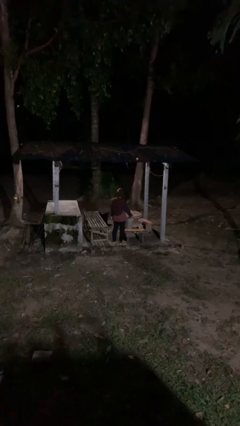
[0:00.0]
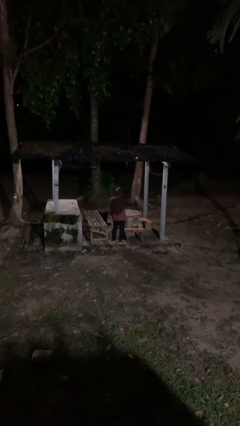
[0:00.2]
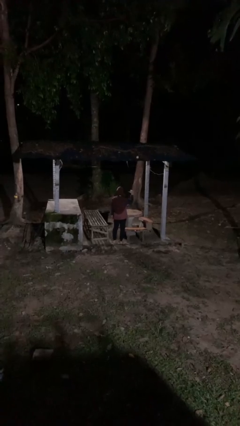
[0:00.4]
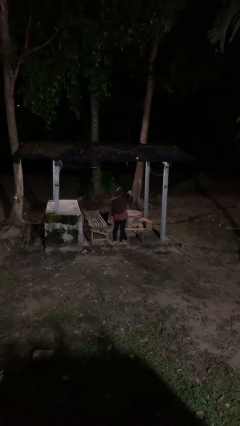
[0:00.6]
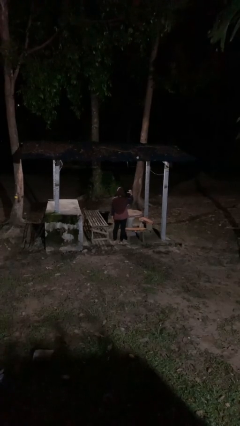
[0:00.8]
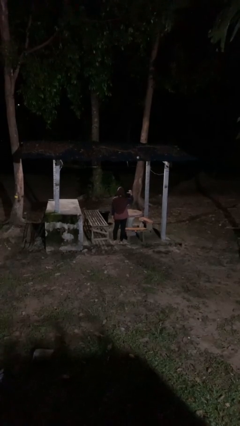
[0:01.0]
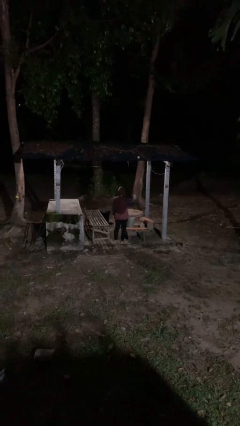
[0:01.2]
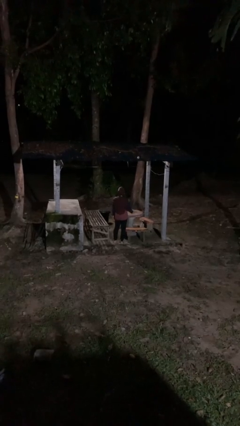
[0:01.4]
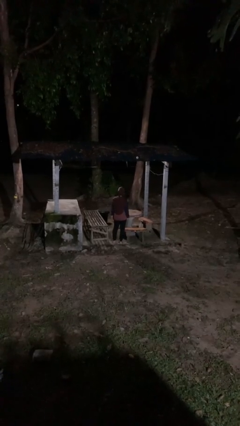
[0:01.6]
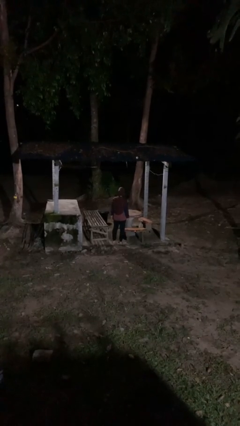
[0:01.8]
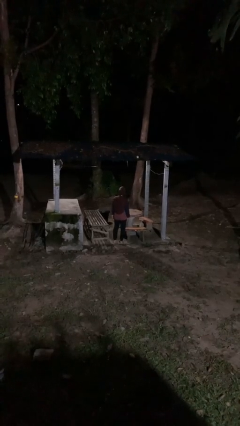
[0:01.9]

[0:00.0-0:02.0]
person gestures behind me

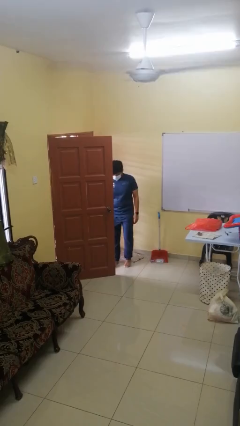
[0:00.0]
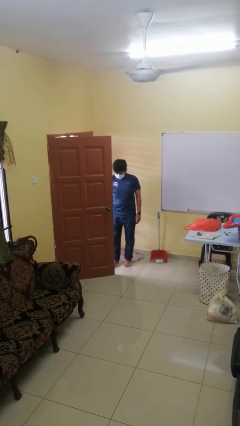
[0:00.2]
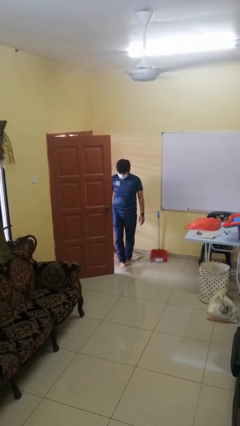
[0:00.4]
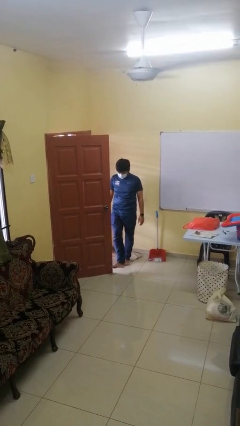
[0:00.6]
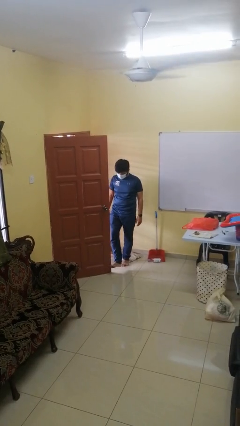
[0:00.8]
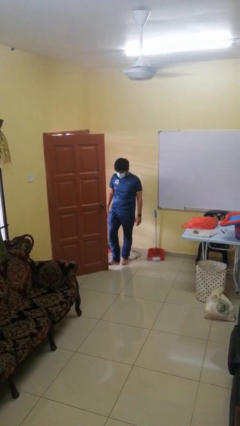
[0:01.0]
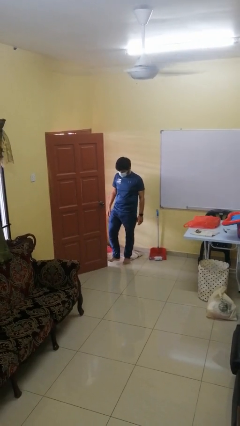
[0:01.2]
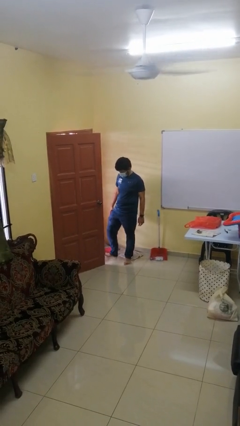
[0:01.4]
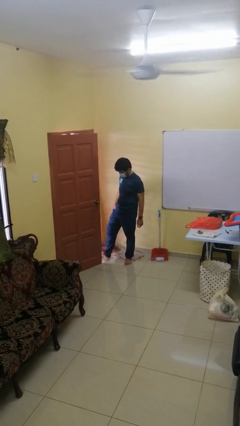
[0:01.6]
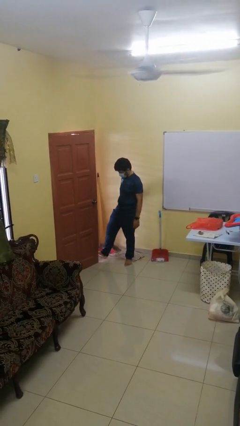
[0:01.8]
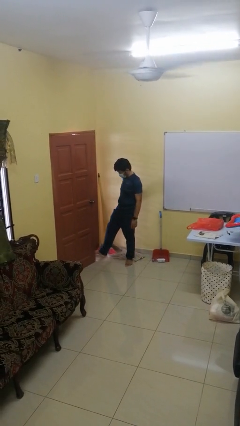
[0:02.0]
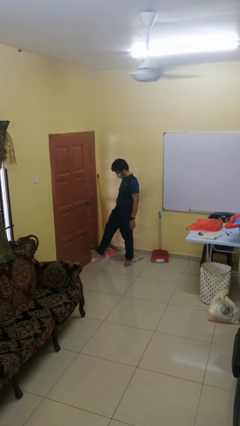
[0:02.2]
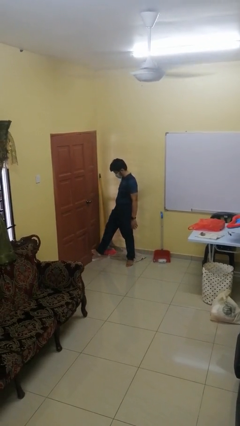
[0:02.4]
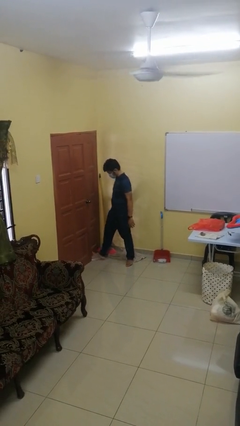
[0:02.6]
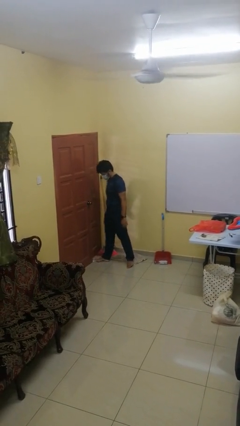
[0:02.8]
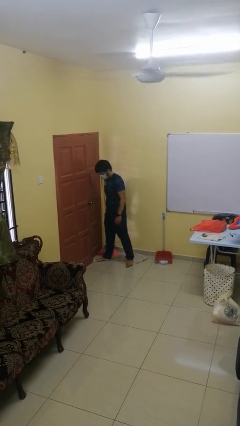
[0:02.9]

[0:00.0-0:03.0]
person closes door with foot

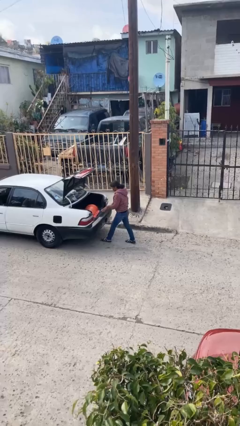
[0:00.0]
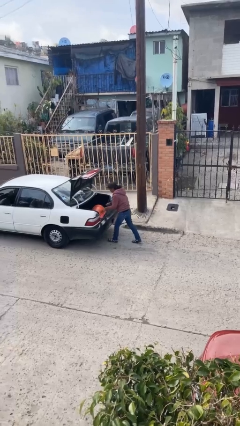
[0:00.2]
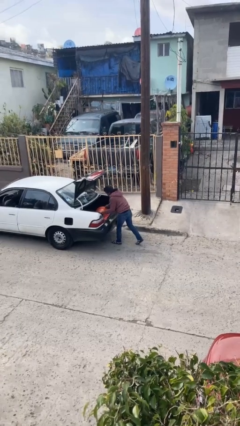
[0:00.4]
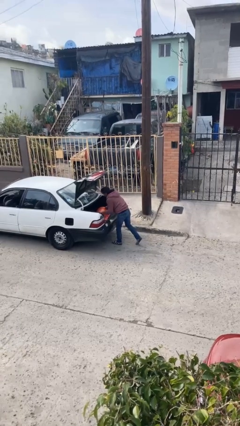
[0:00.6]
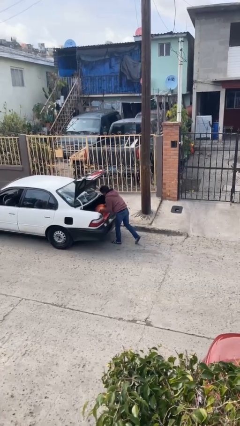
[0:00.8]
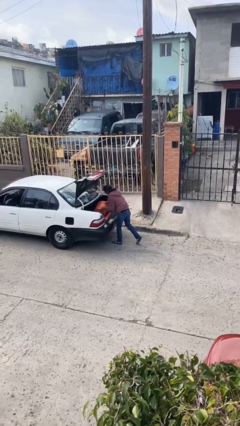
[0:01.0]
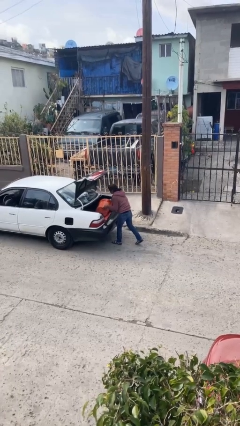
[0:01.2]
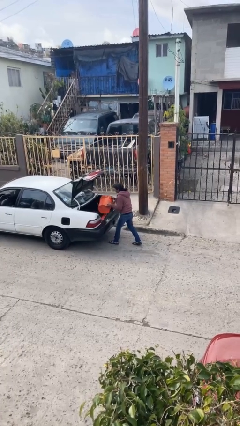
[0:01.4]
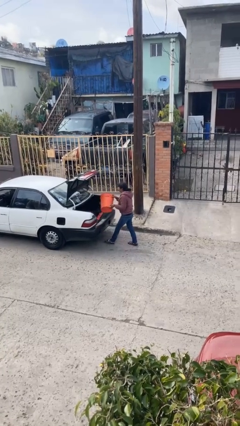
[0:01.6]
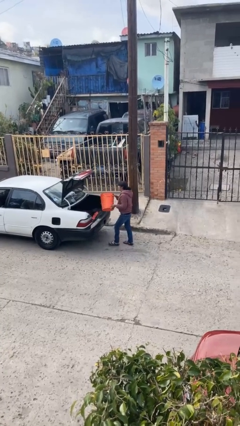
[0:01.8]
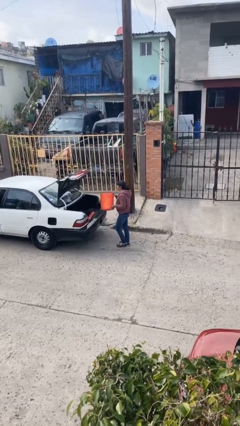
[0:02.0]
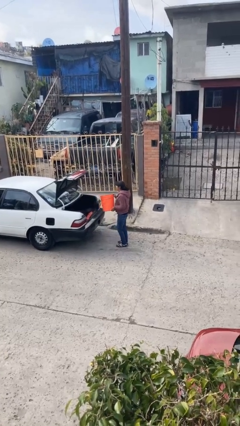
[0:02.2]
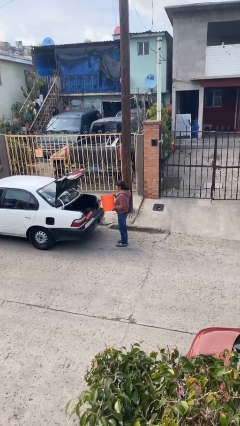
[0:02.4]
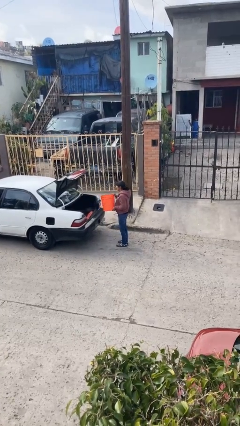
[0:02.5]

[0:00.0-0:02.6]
person unloads car

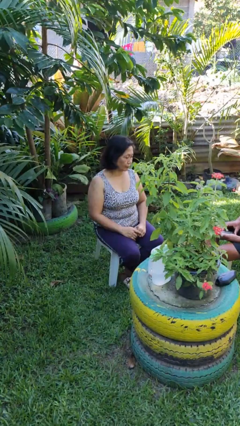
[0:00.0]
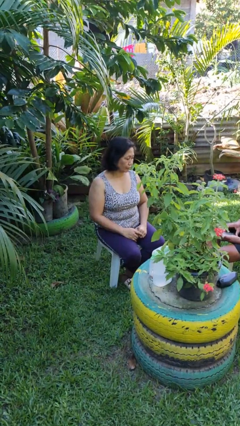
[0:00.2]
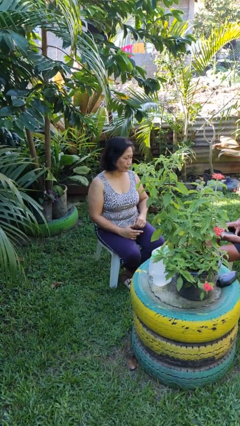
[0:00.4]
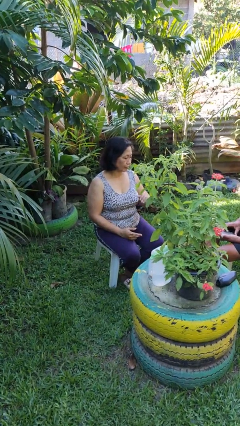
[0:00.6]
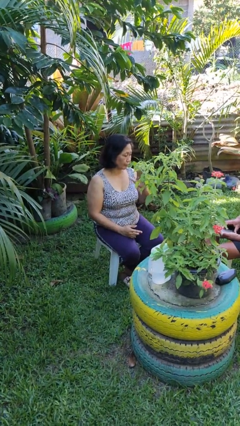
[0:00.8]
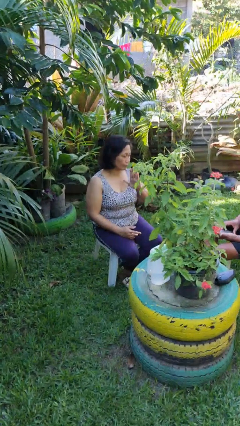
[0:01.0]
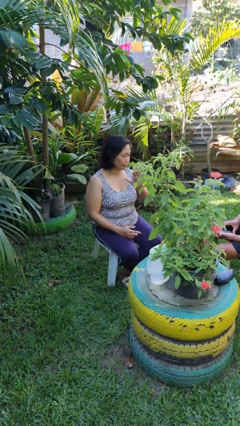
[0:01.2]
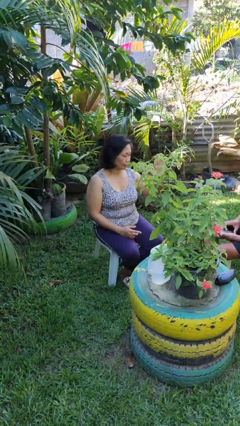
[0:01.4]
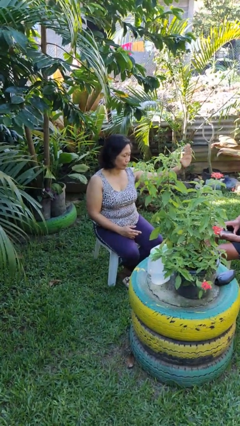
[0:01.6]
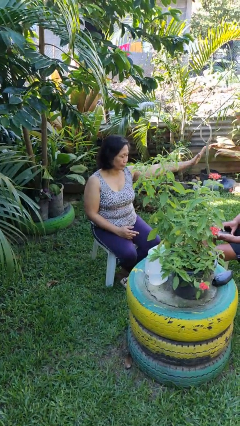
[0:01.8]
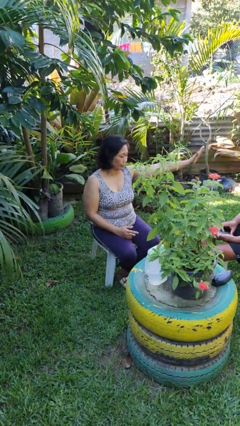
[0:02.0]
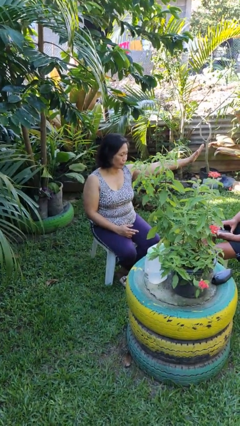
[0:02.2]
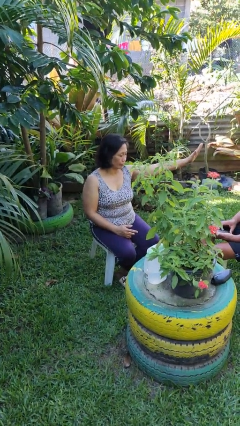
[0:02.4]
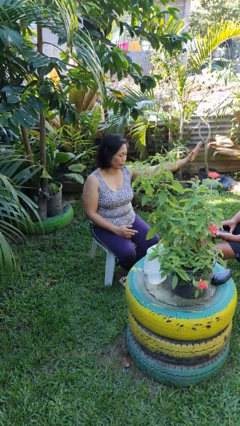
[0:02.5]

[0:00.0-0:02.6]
person gestures swipe left

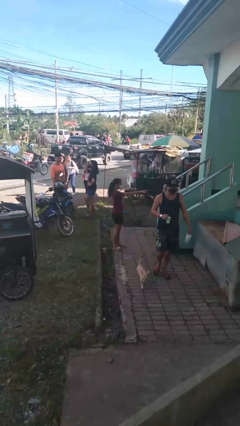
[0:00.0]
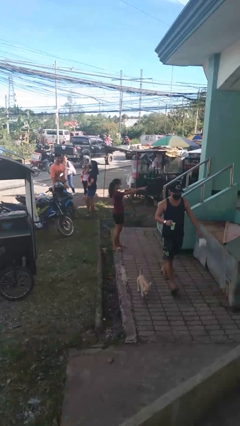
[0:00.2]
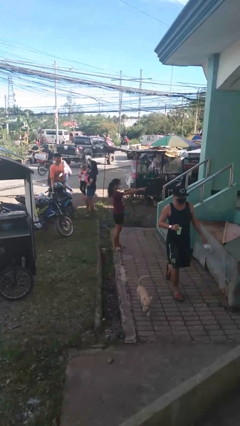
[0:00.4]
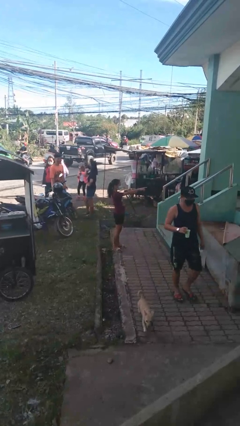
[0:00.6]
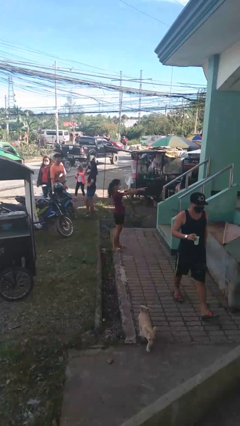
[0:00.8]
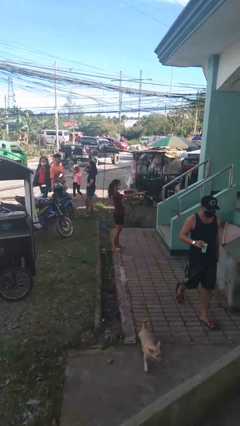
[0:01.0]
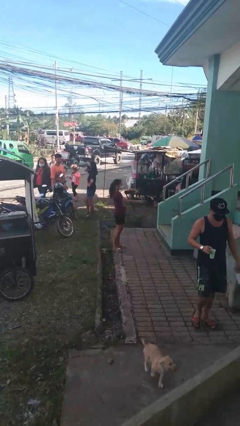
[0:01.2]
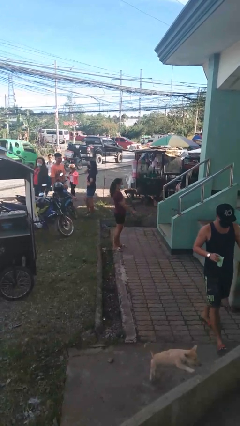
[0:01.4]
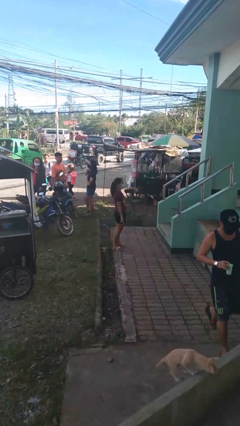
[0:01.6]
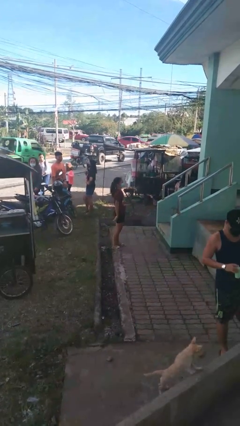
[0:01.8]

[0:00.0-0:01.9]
person points at person

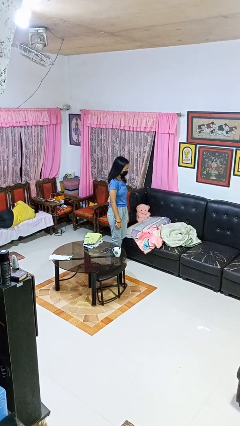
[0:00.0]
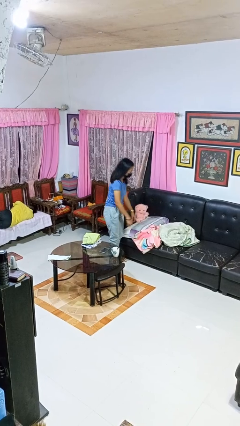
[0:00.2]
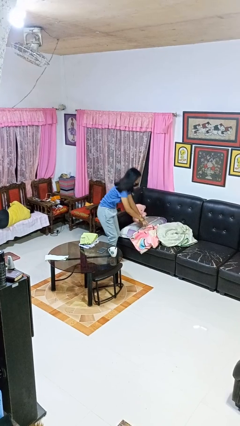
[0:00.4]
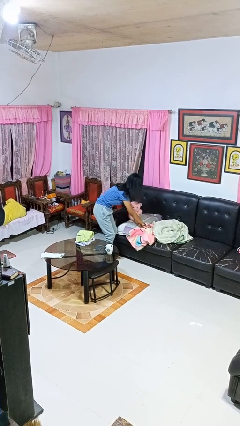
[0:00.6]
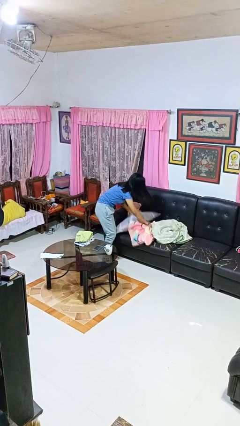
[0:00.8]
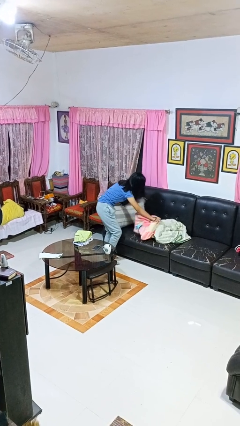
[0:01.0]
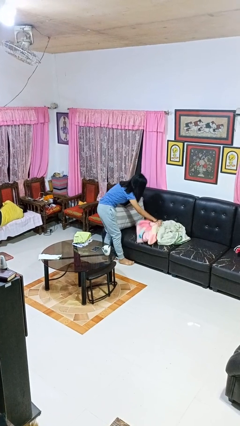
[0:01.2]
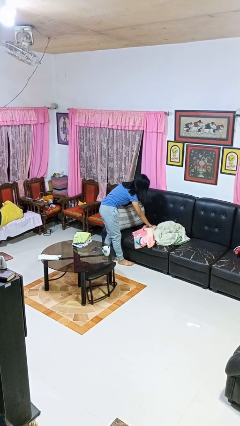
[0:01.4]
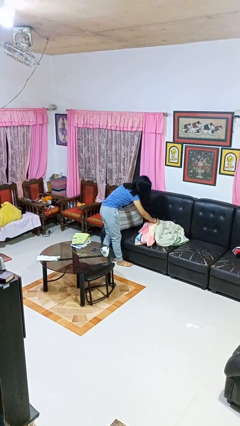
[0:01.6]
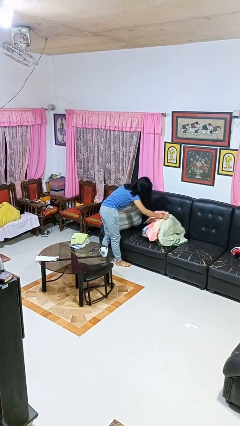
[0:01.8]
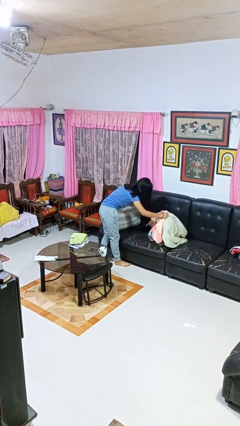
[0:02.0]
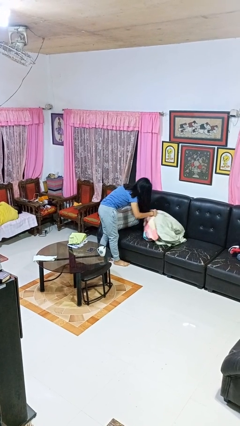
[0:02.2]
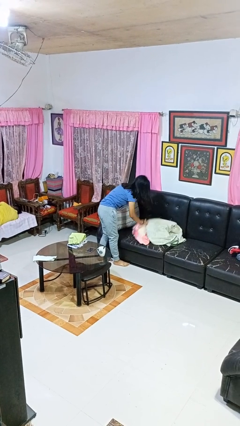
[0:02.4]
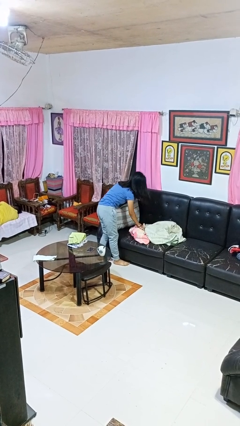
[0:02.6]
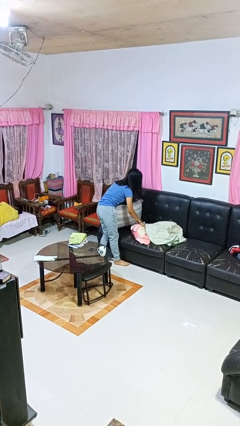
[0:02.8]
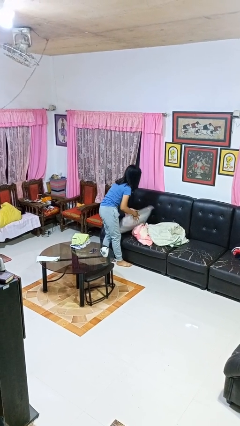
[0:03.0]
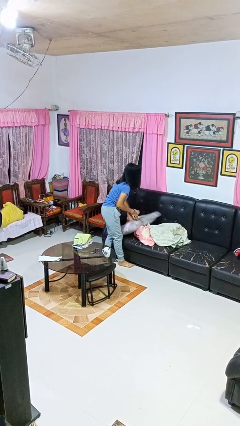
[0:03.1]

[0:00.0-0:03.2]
person searches in couch

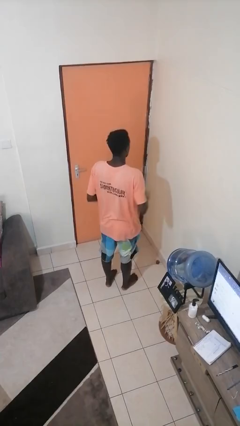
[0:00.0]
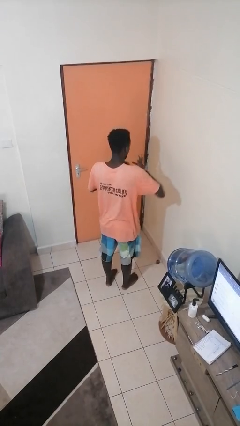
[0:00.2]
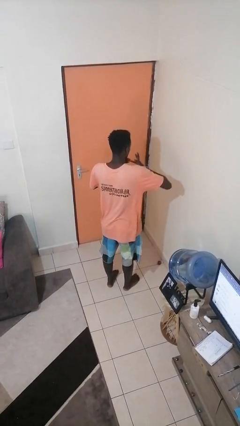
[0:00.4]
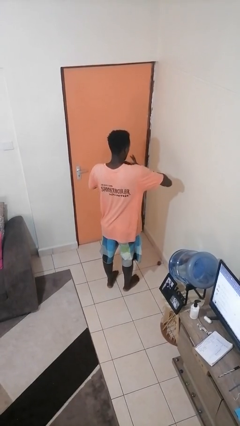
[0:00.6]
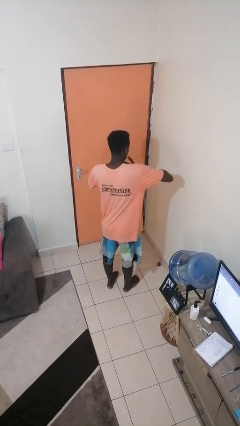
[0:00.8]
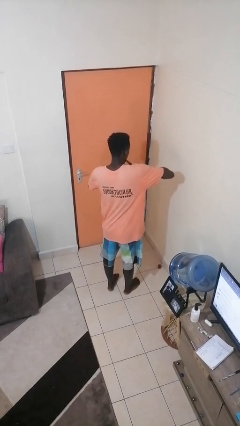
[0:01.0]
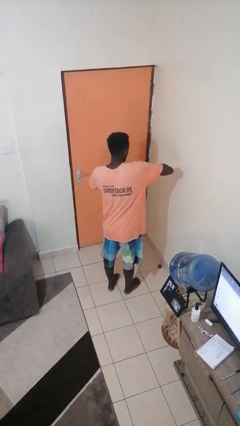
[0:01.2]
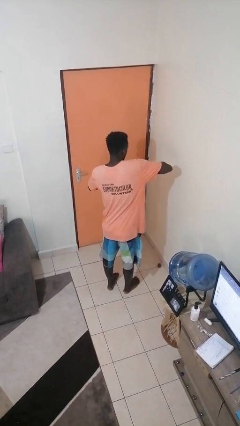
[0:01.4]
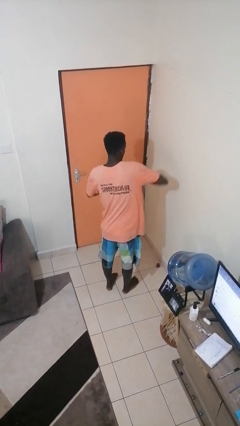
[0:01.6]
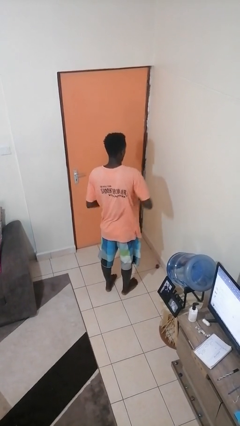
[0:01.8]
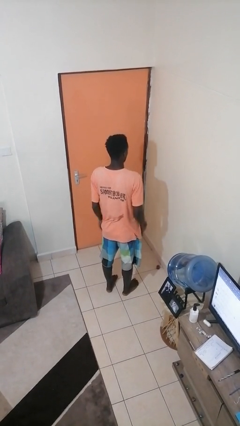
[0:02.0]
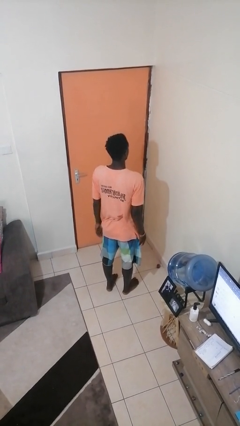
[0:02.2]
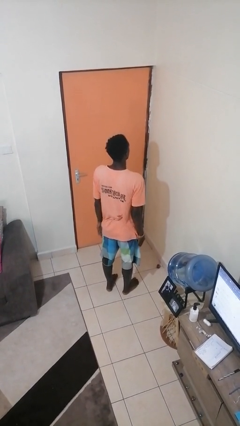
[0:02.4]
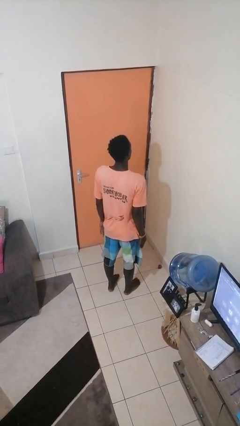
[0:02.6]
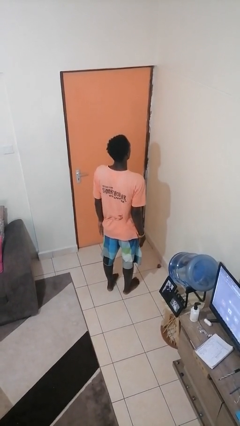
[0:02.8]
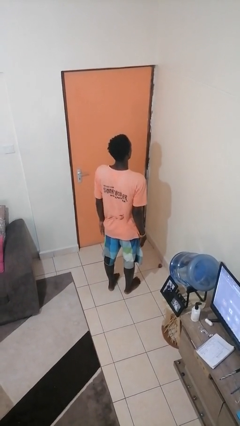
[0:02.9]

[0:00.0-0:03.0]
person puts on ring
